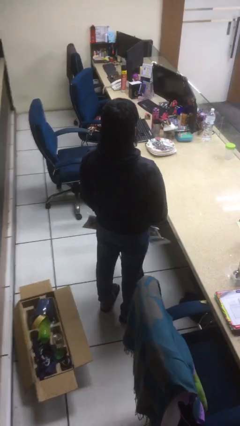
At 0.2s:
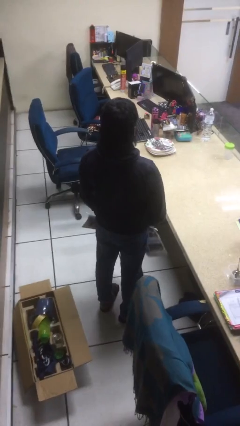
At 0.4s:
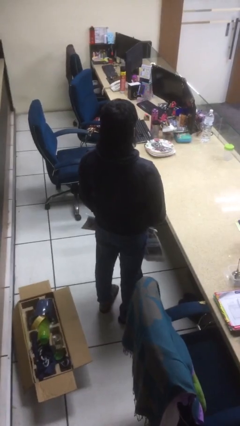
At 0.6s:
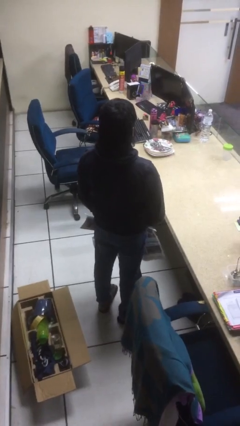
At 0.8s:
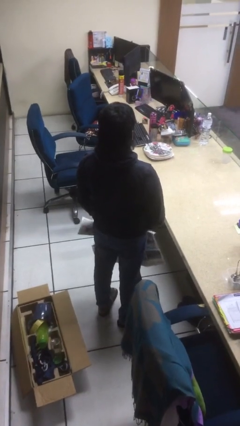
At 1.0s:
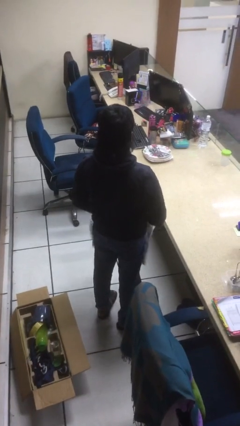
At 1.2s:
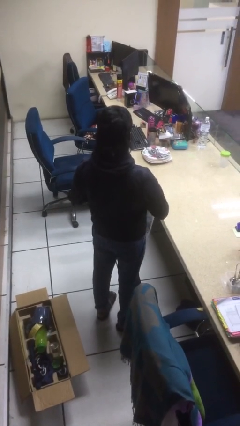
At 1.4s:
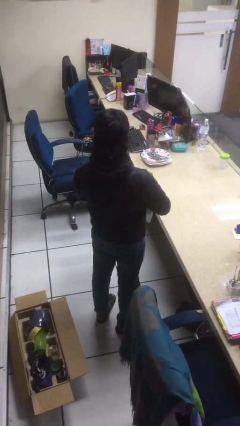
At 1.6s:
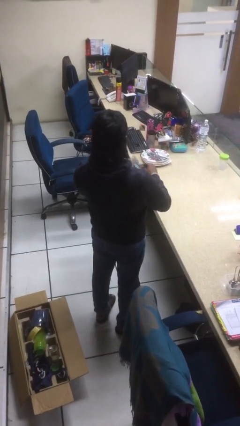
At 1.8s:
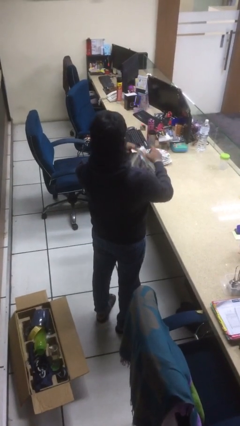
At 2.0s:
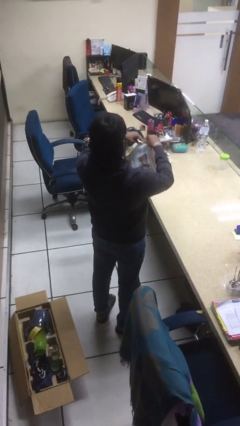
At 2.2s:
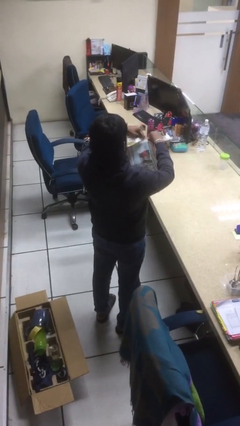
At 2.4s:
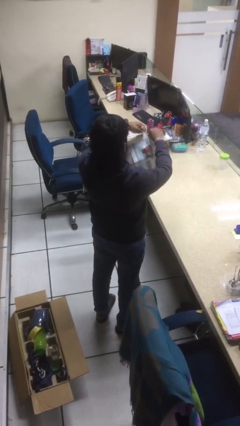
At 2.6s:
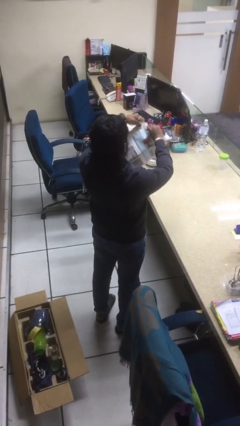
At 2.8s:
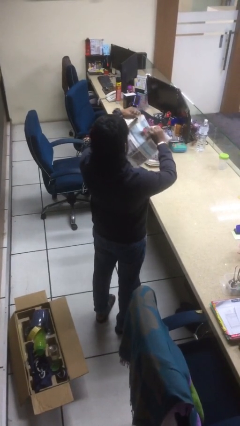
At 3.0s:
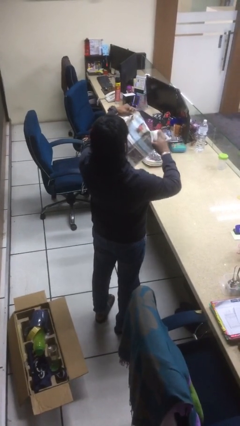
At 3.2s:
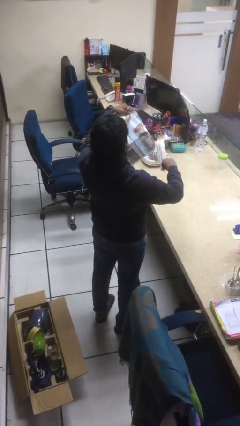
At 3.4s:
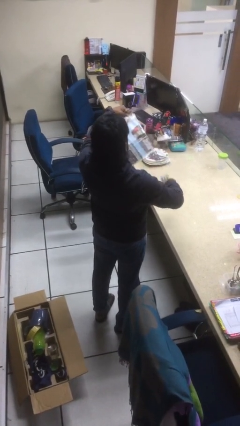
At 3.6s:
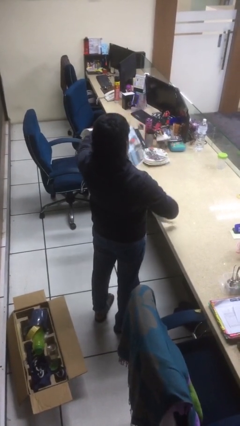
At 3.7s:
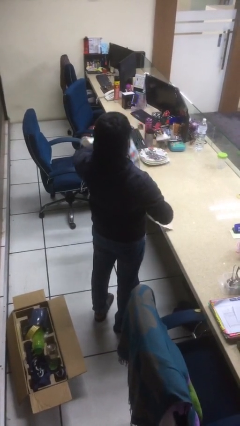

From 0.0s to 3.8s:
person tears paper

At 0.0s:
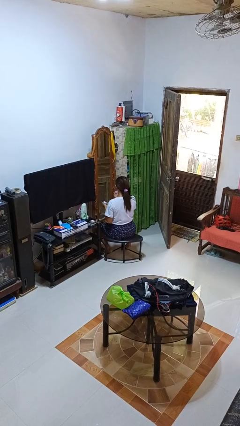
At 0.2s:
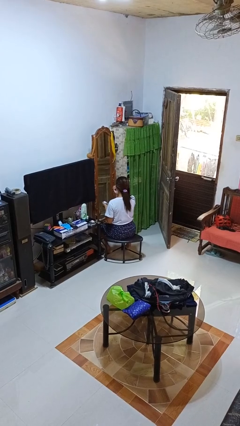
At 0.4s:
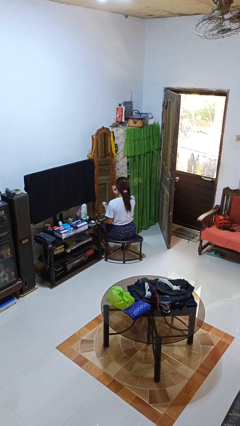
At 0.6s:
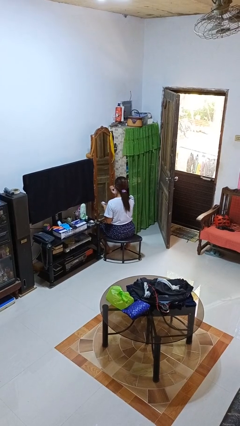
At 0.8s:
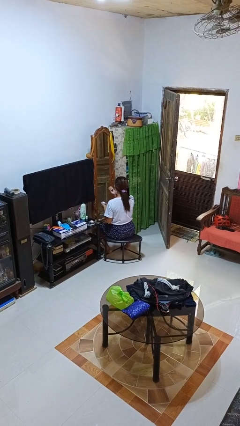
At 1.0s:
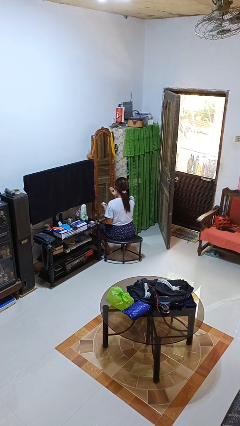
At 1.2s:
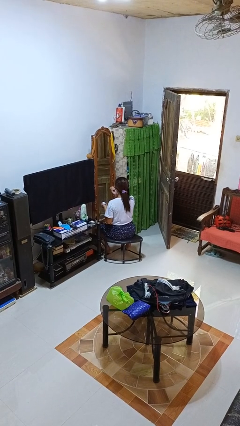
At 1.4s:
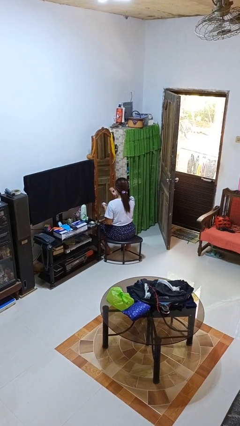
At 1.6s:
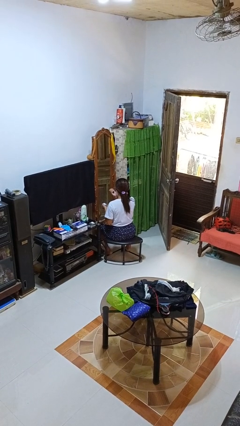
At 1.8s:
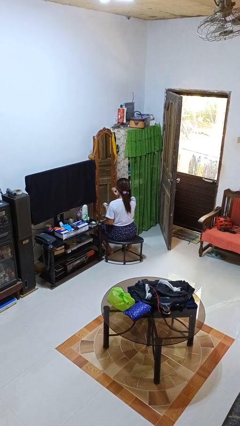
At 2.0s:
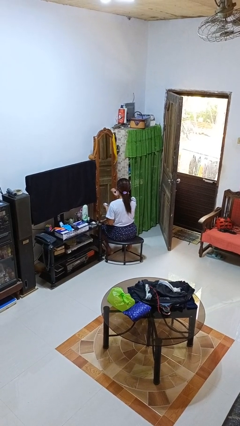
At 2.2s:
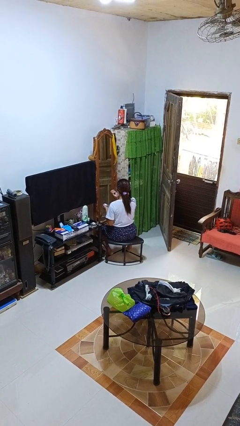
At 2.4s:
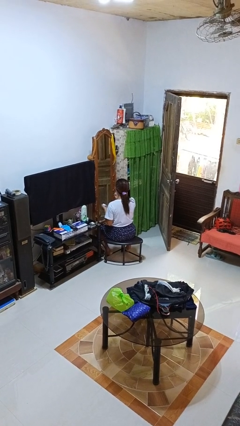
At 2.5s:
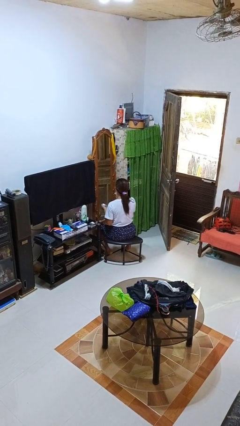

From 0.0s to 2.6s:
person applies eye makeup

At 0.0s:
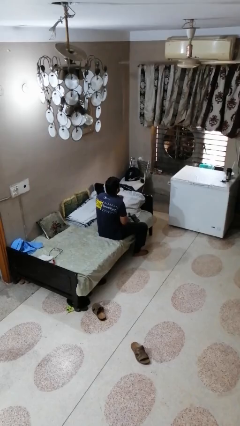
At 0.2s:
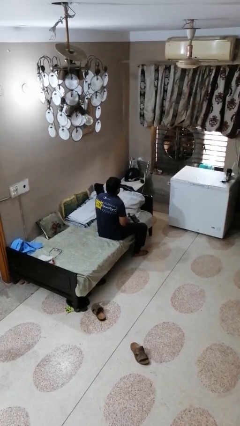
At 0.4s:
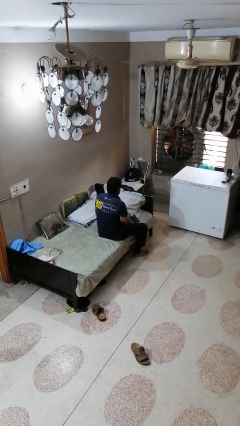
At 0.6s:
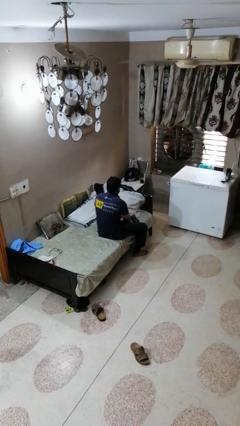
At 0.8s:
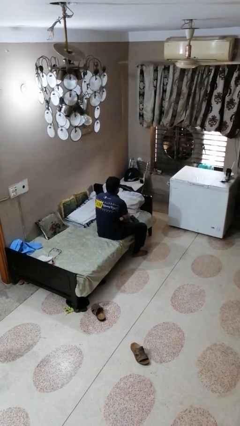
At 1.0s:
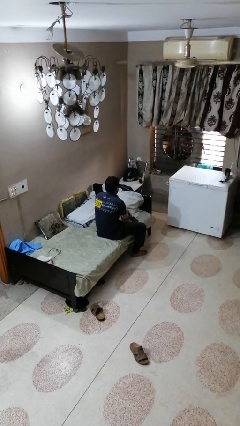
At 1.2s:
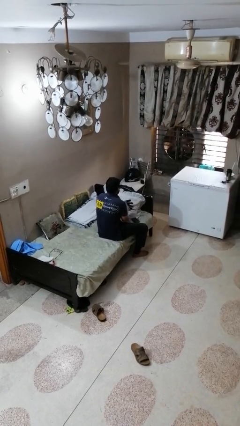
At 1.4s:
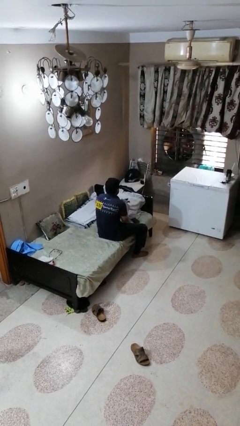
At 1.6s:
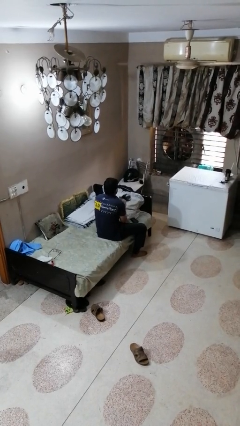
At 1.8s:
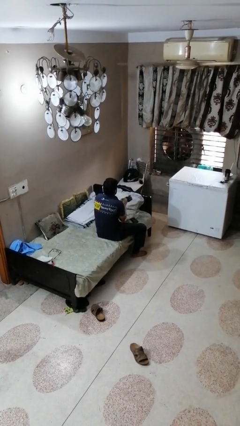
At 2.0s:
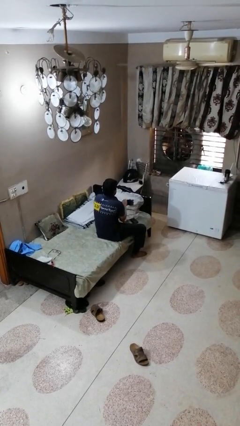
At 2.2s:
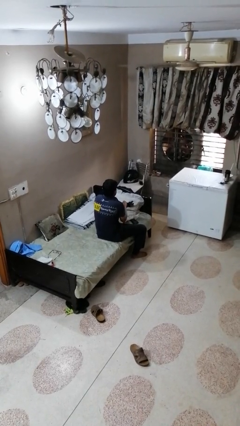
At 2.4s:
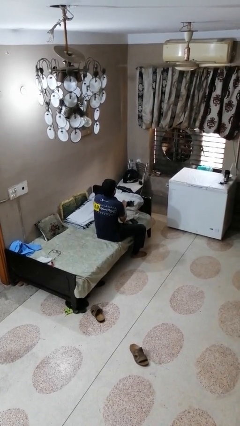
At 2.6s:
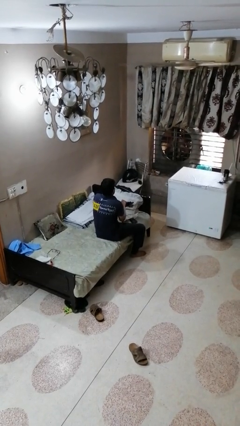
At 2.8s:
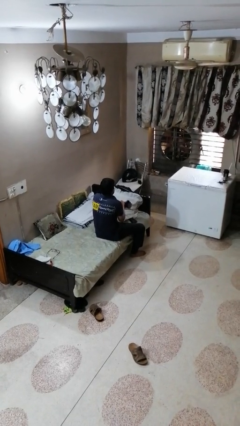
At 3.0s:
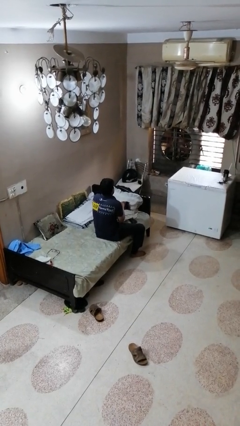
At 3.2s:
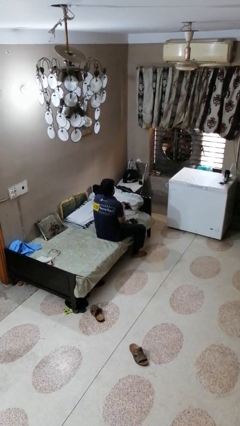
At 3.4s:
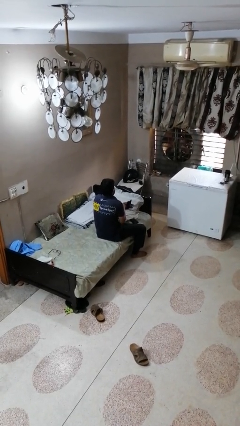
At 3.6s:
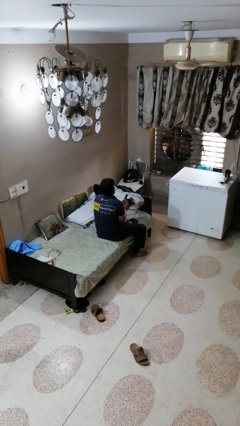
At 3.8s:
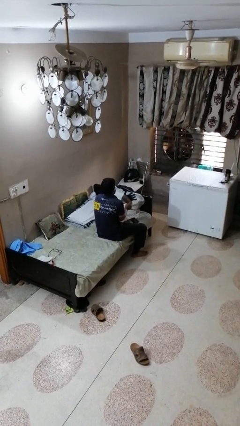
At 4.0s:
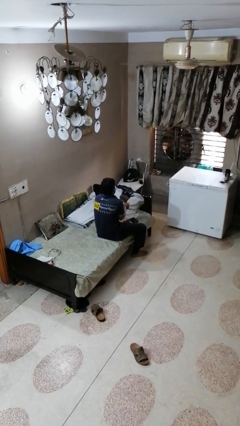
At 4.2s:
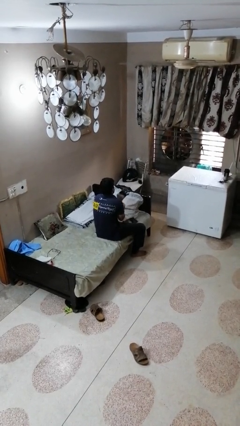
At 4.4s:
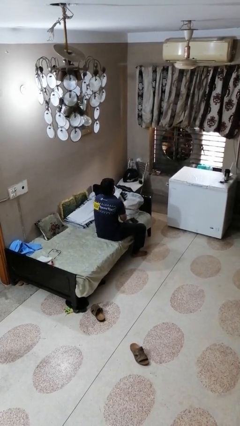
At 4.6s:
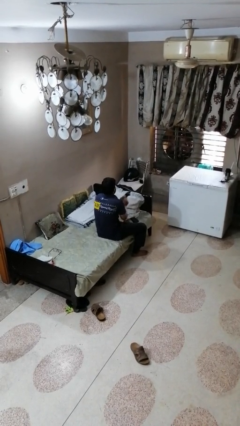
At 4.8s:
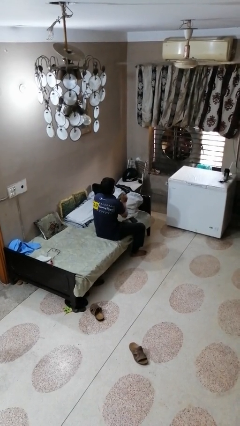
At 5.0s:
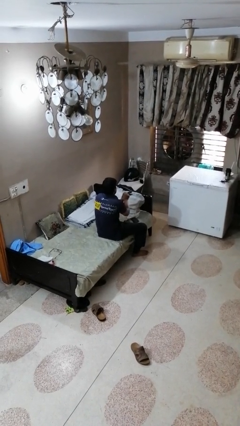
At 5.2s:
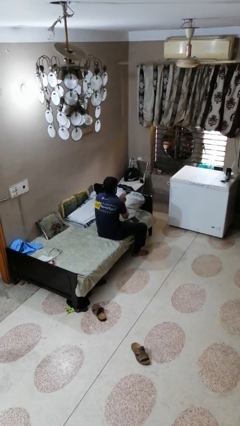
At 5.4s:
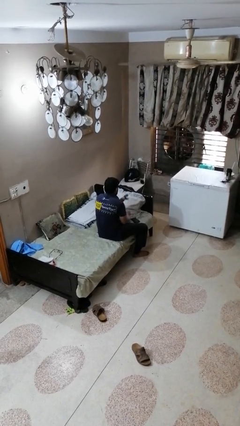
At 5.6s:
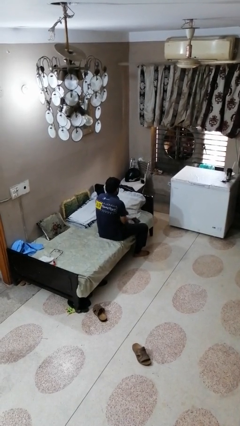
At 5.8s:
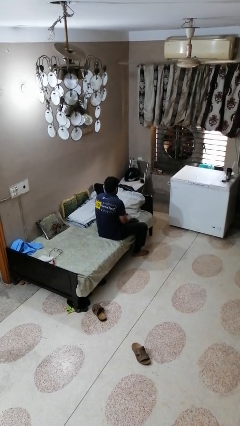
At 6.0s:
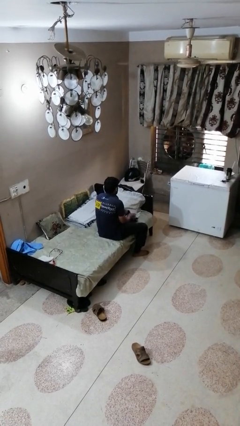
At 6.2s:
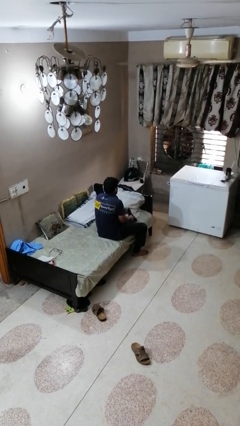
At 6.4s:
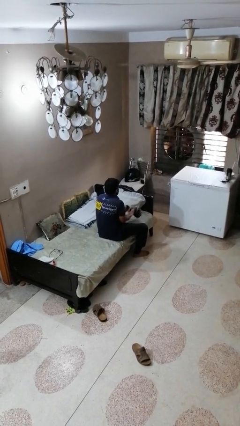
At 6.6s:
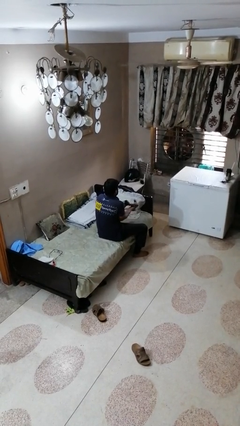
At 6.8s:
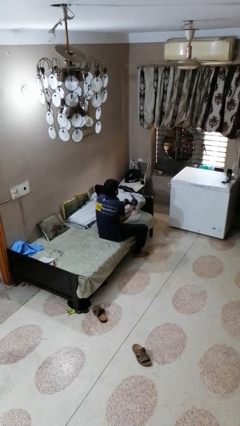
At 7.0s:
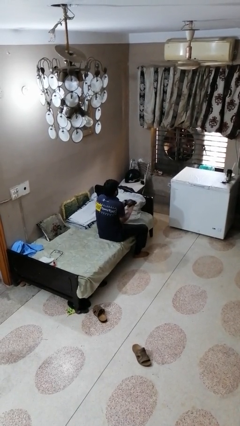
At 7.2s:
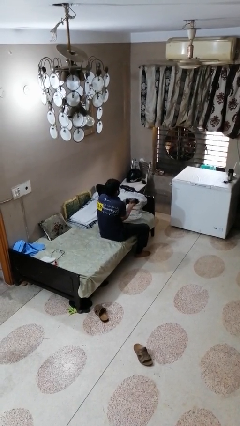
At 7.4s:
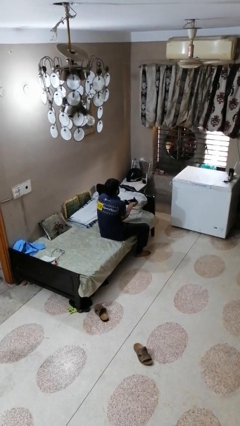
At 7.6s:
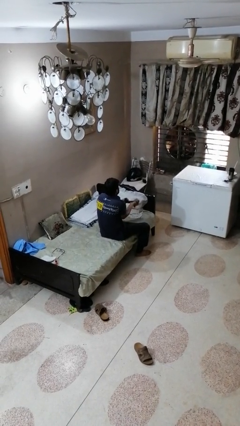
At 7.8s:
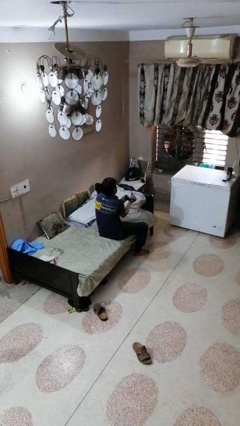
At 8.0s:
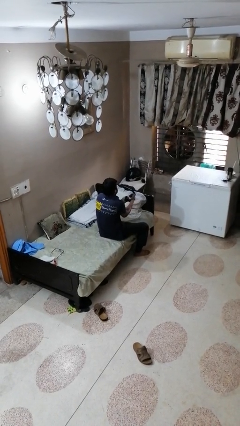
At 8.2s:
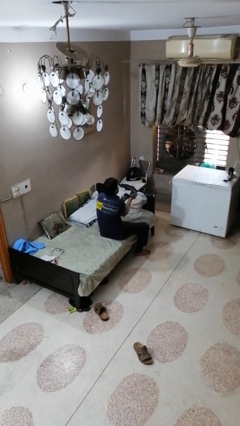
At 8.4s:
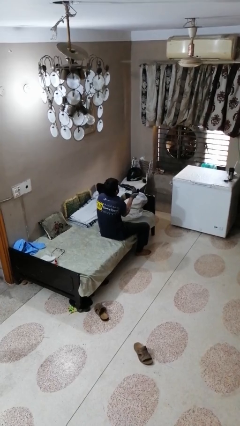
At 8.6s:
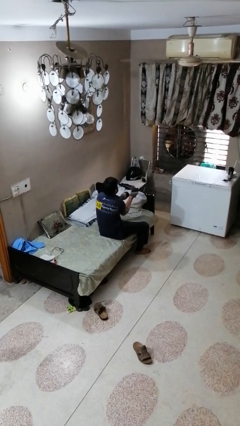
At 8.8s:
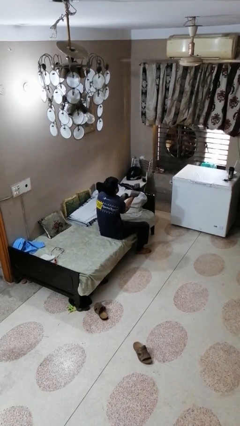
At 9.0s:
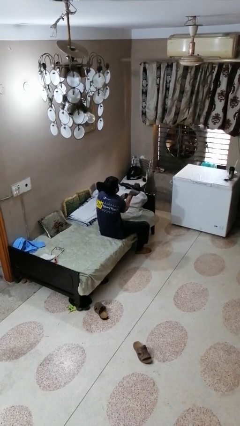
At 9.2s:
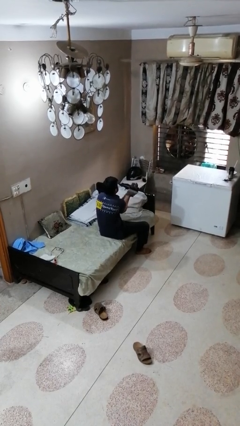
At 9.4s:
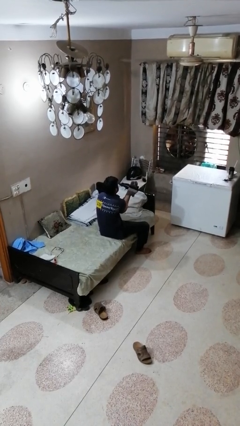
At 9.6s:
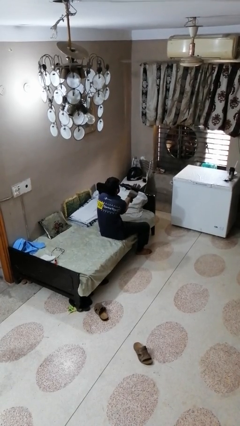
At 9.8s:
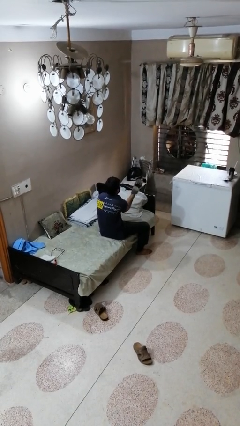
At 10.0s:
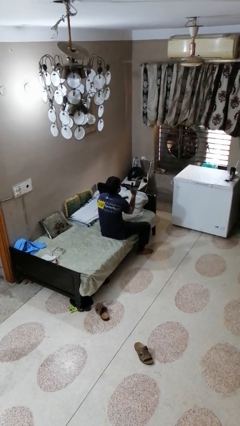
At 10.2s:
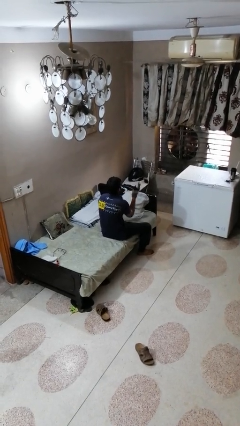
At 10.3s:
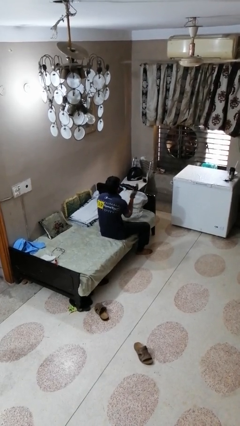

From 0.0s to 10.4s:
person puts on gloves

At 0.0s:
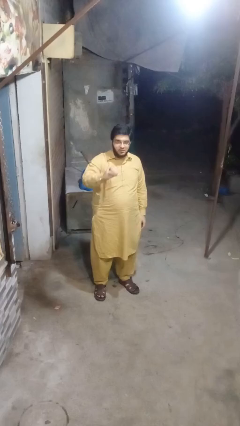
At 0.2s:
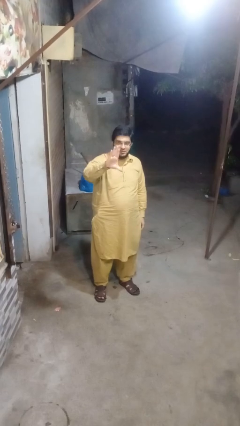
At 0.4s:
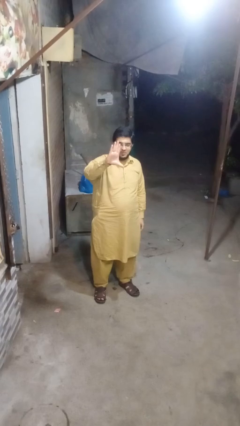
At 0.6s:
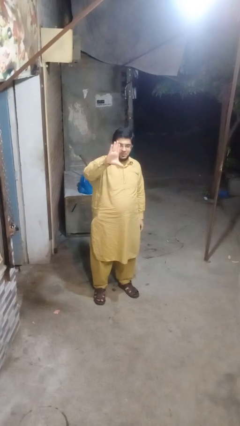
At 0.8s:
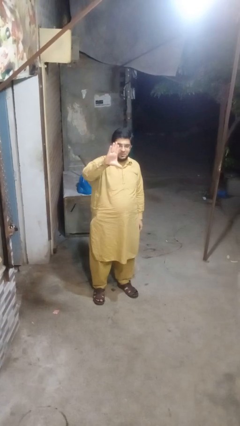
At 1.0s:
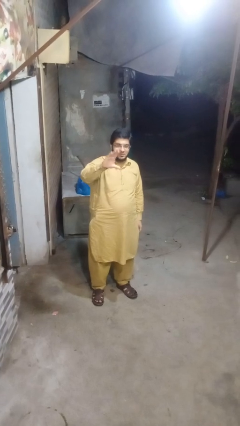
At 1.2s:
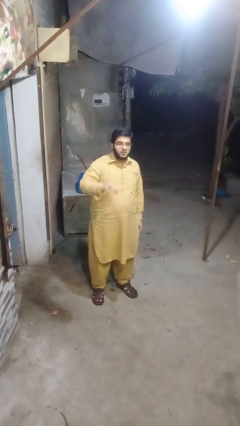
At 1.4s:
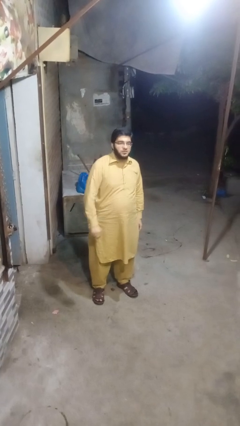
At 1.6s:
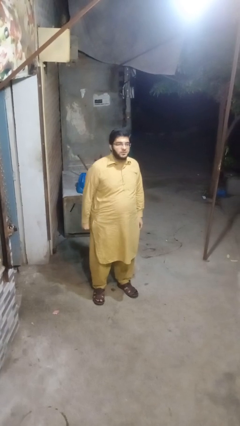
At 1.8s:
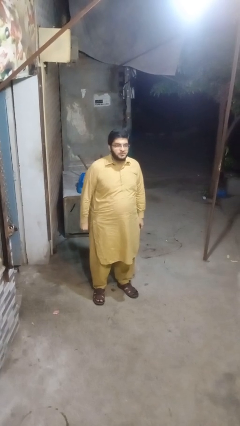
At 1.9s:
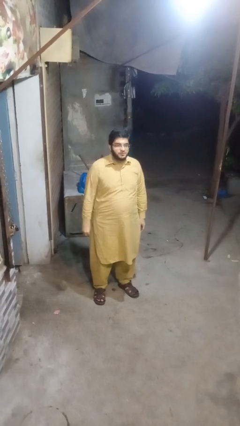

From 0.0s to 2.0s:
person gestures zoom in
